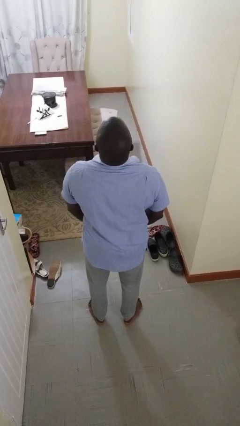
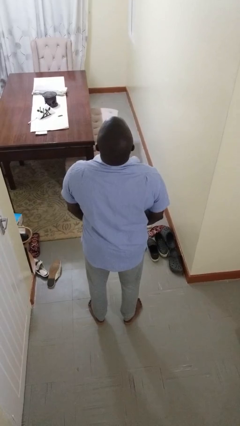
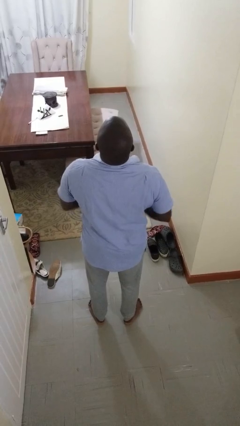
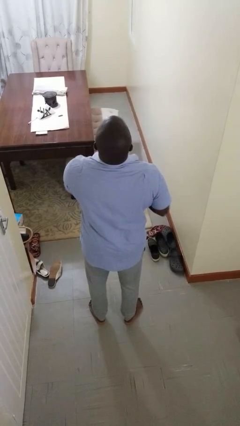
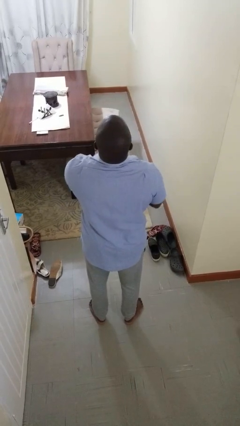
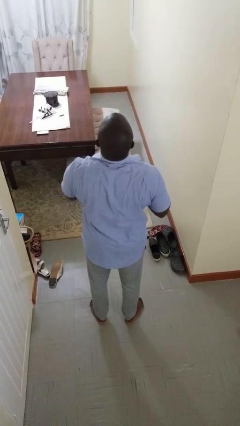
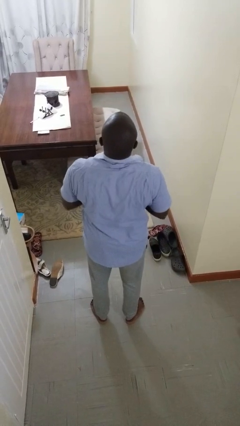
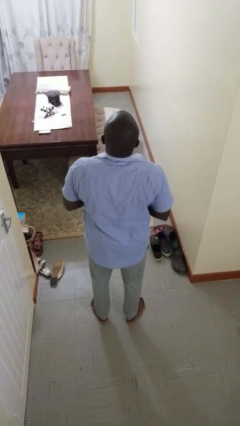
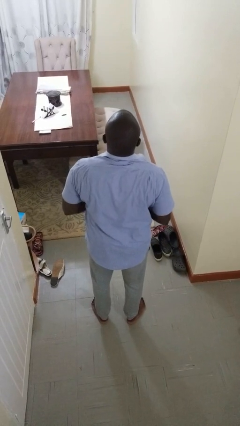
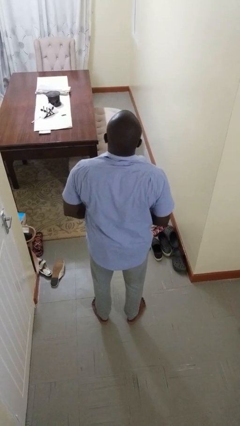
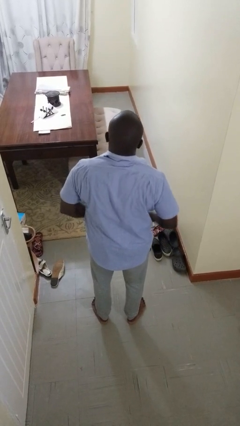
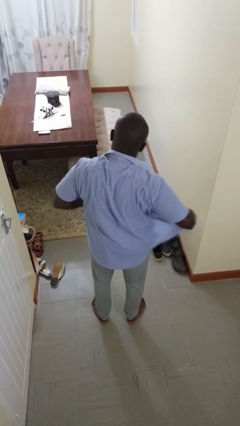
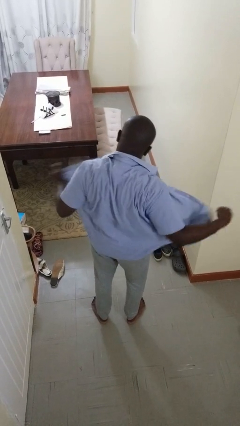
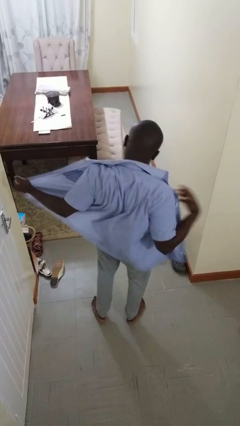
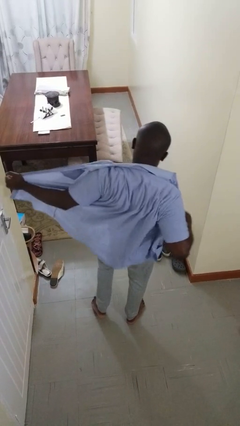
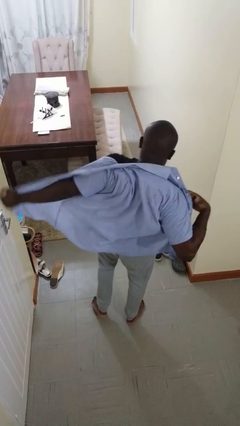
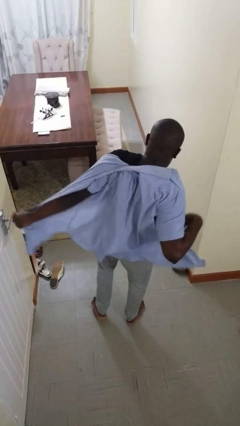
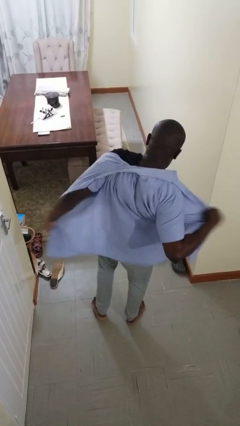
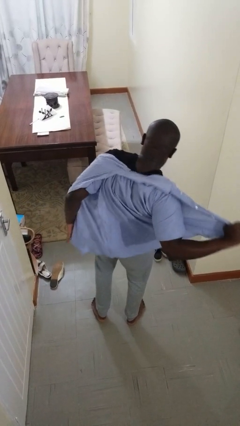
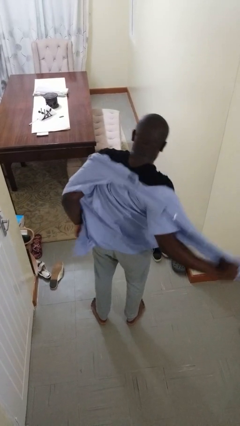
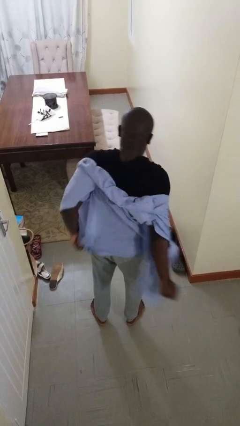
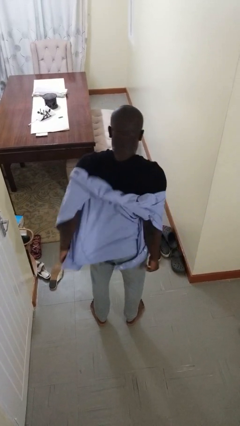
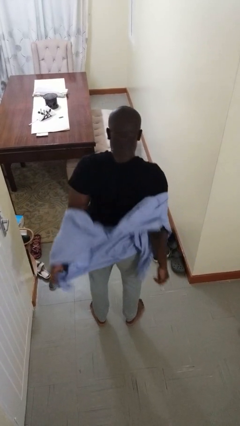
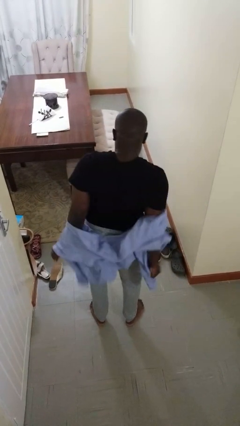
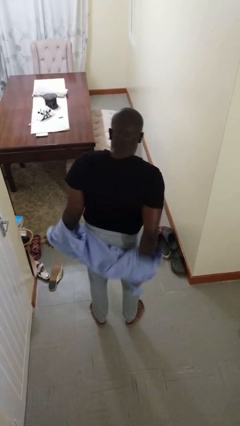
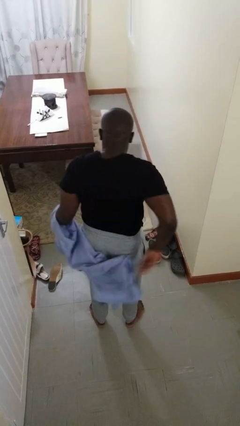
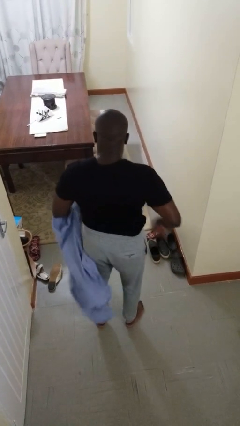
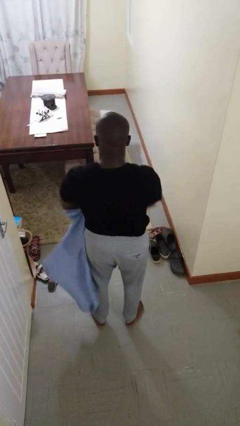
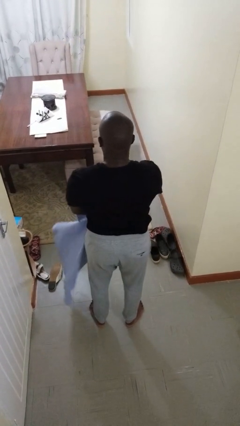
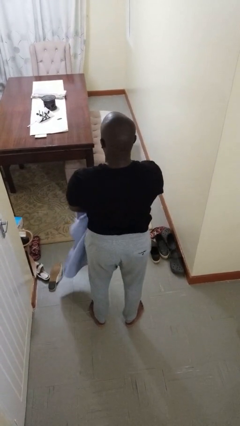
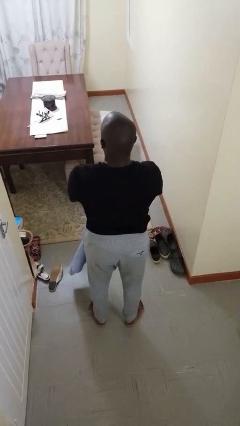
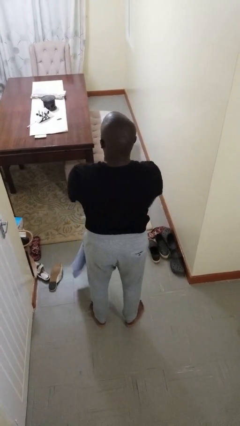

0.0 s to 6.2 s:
person takes off shirt

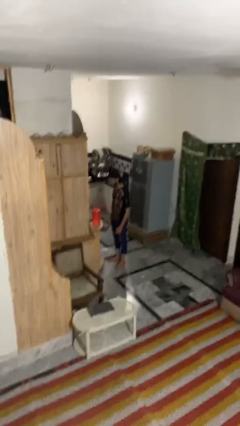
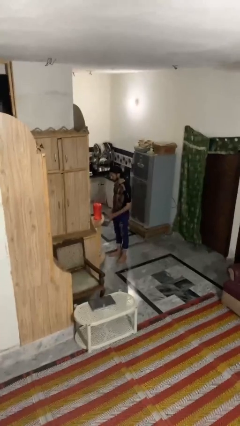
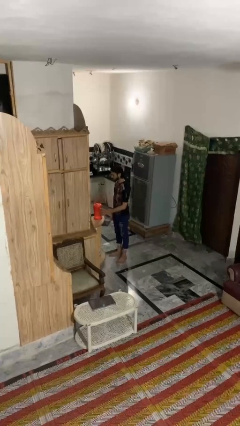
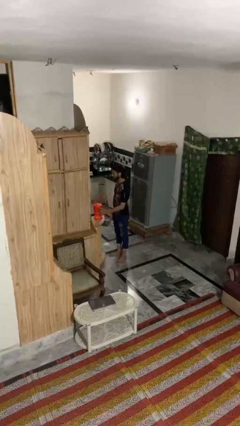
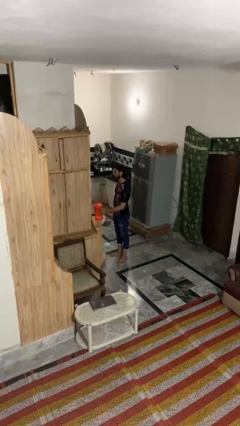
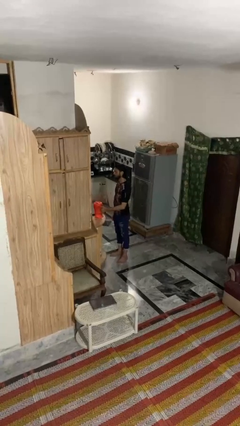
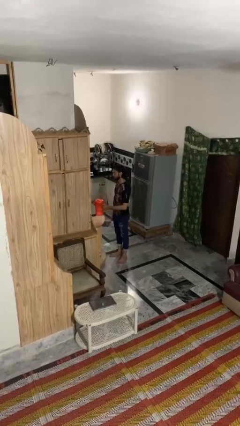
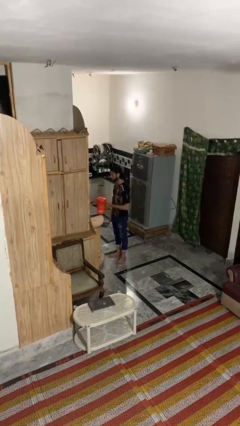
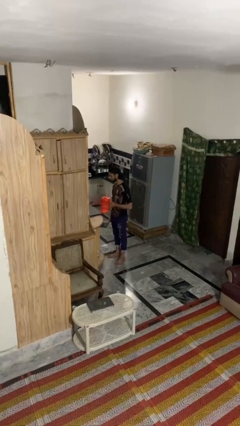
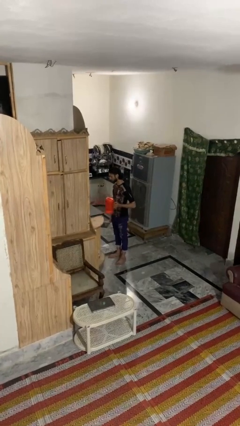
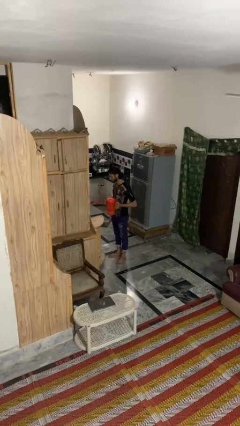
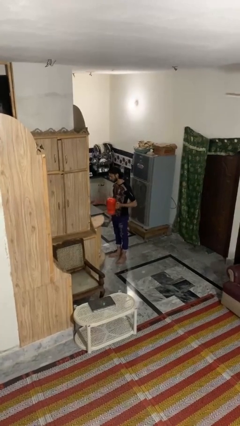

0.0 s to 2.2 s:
person picks up object from countertop

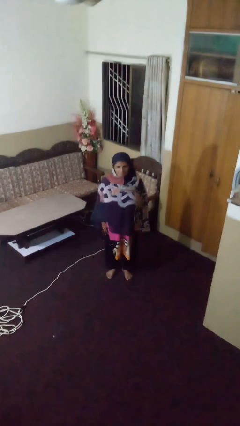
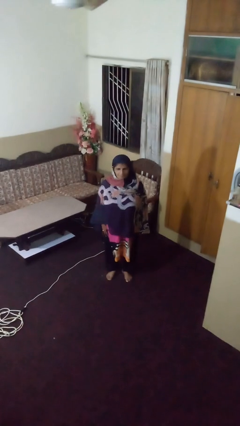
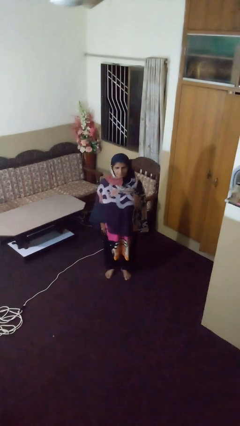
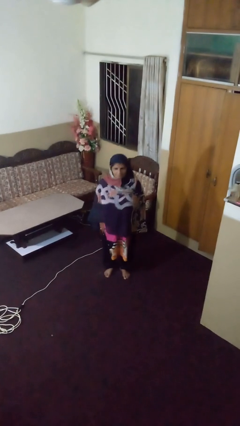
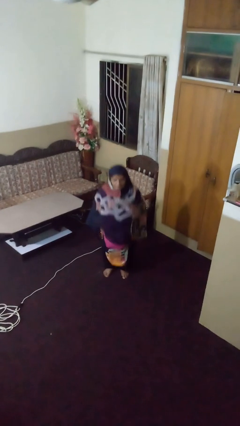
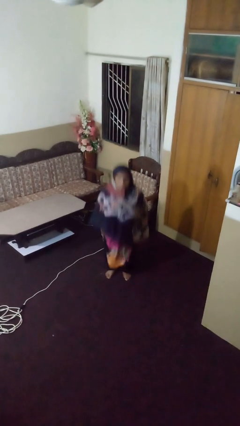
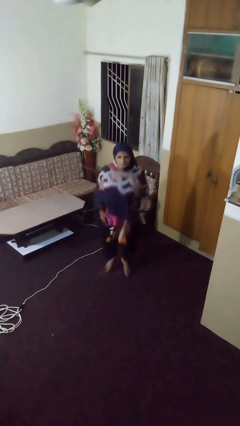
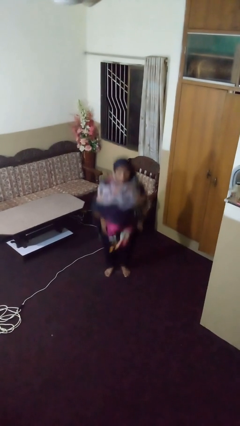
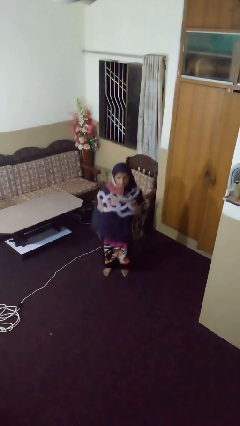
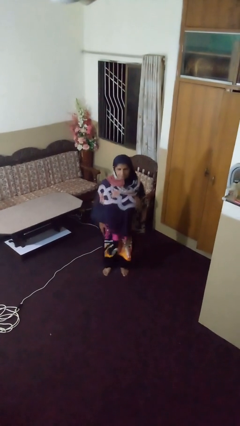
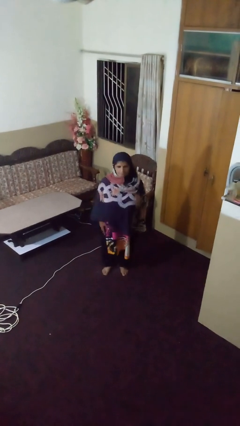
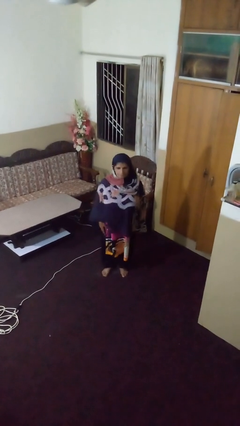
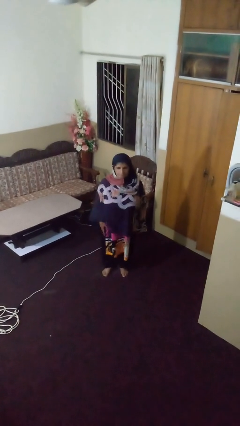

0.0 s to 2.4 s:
person jumps

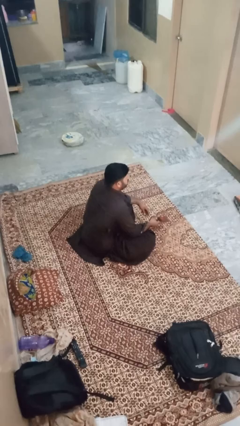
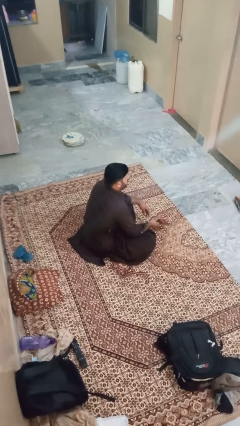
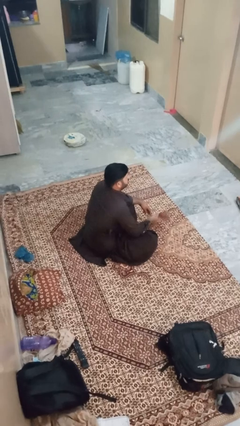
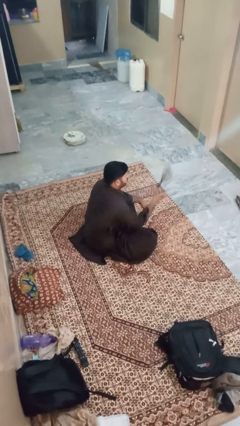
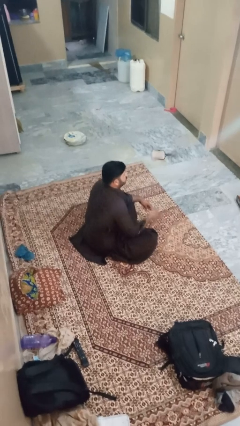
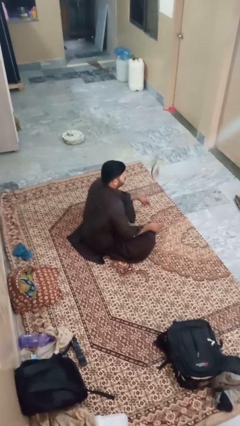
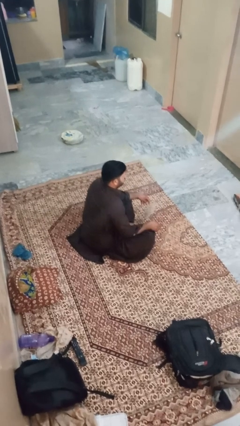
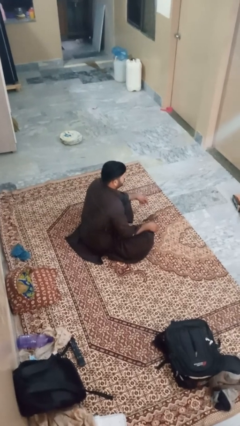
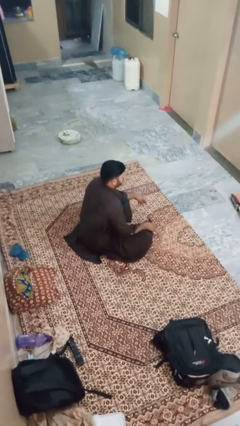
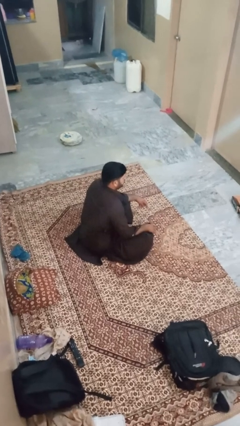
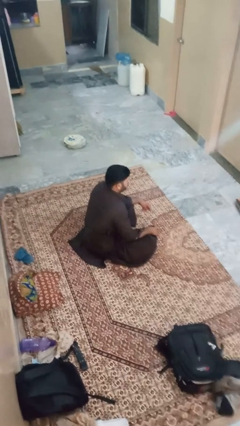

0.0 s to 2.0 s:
person throws object into air

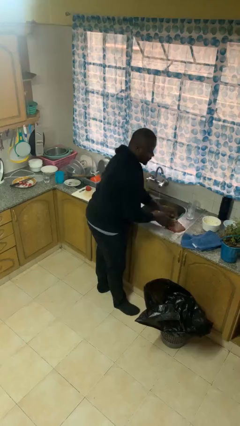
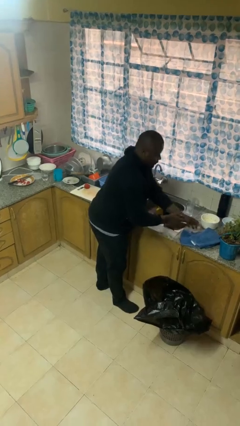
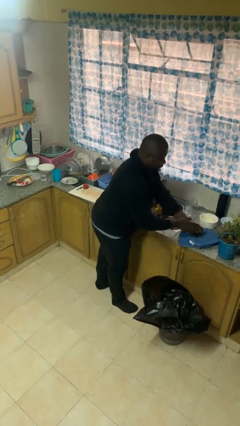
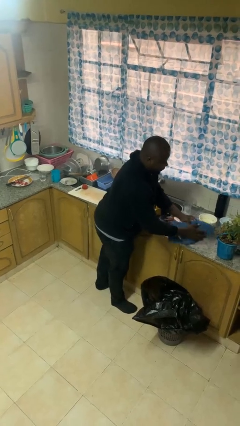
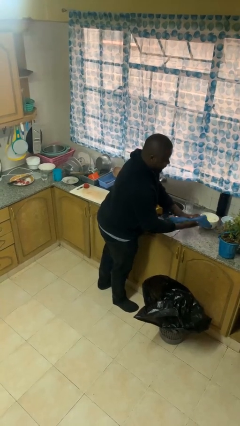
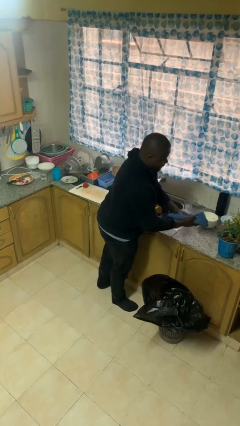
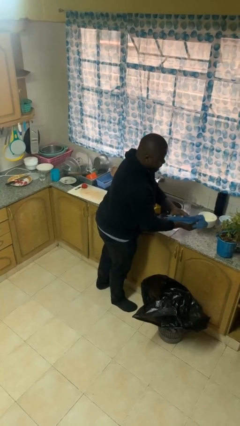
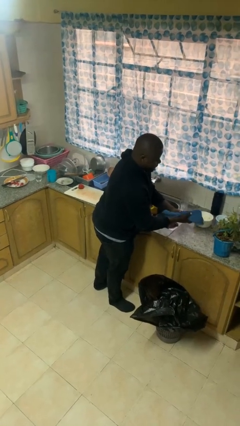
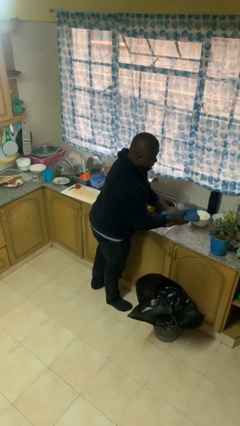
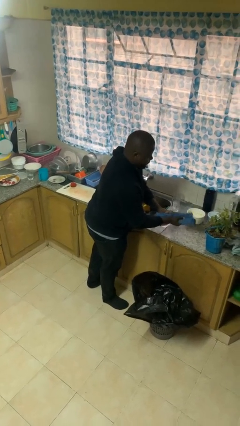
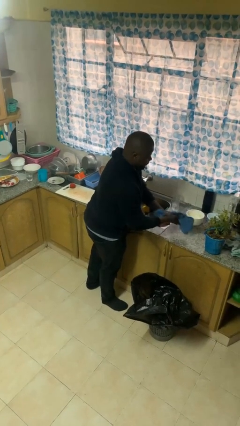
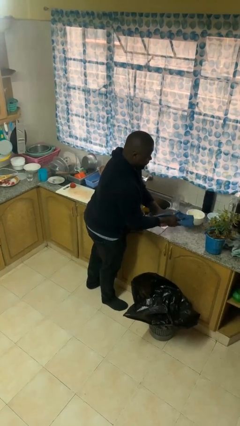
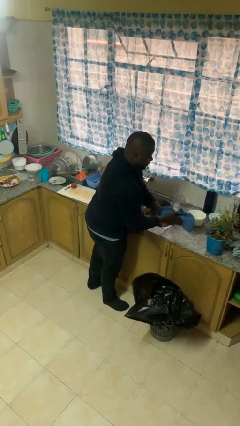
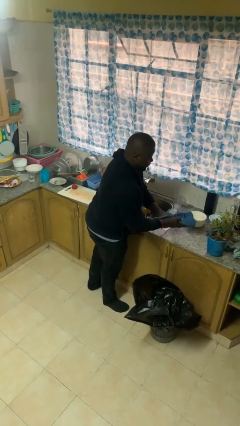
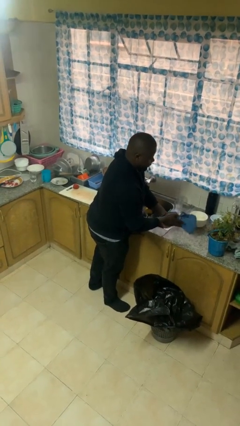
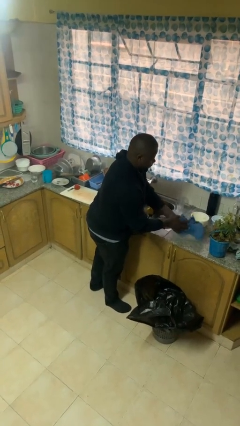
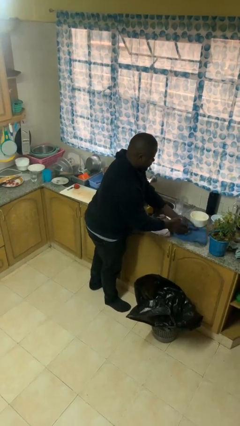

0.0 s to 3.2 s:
person dries hands with towel

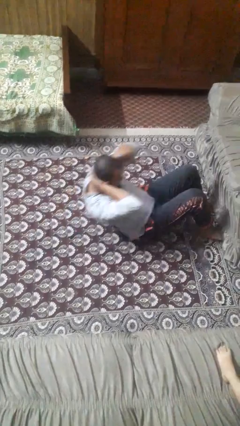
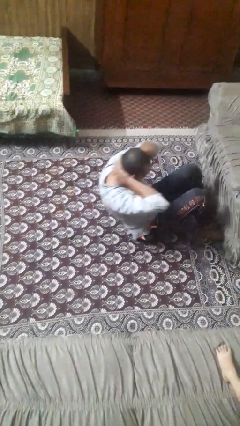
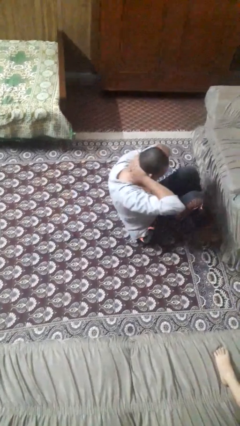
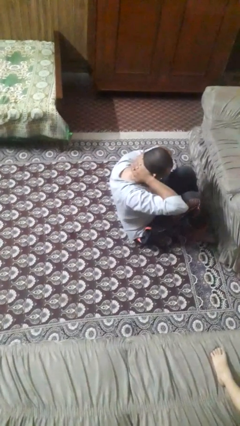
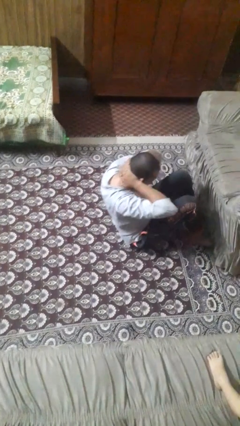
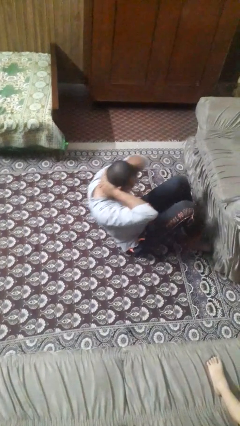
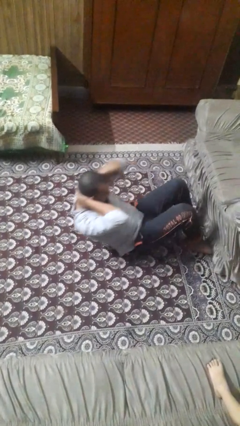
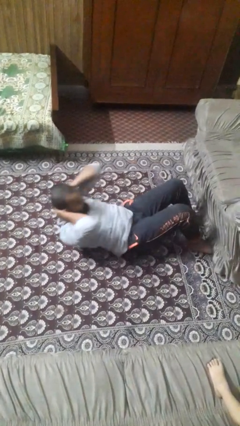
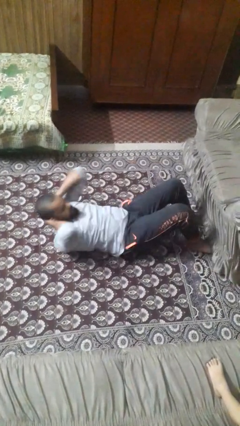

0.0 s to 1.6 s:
person exercises with situp
